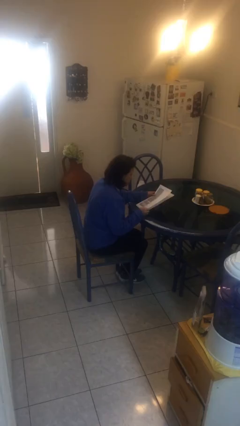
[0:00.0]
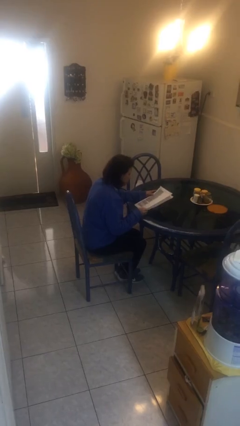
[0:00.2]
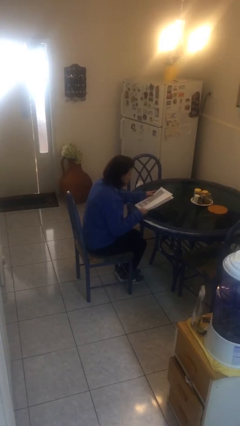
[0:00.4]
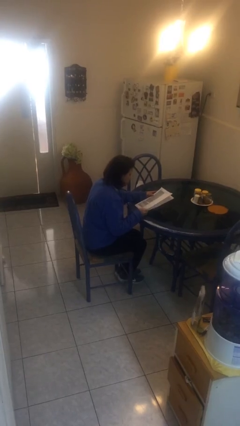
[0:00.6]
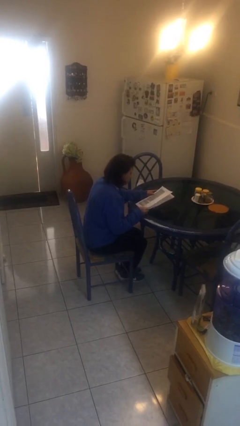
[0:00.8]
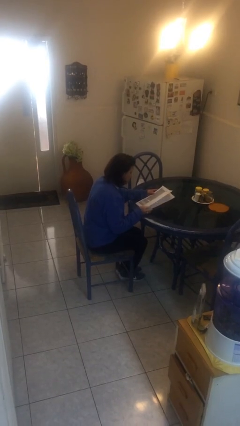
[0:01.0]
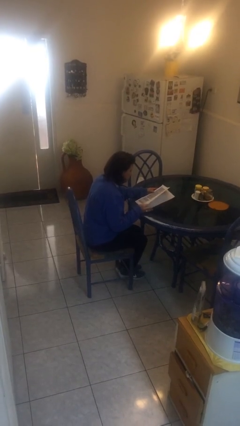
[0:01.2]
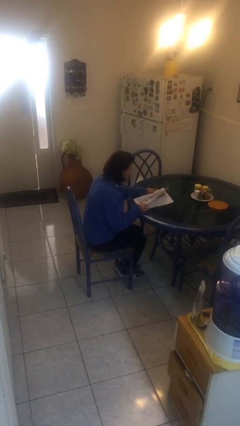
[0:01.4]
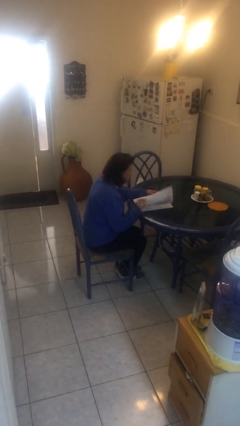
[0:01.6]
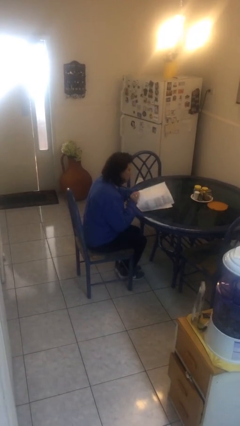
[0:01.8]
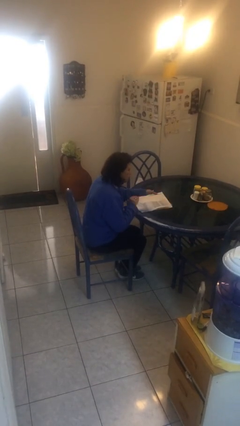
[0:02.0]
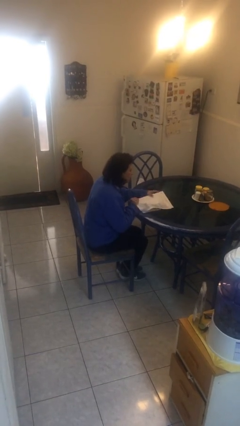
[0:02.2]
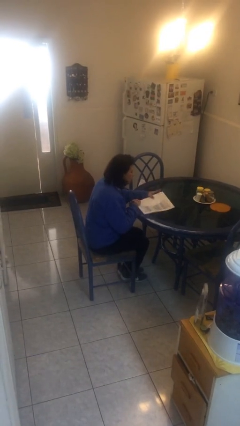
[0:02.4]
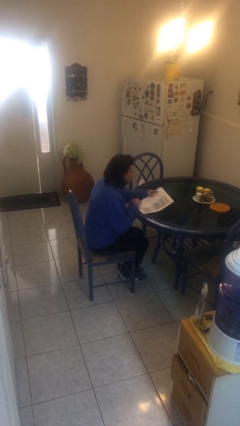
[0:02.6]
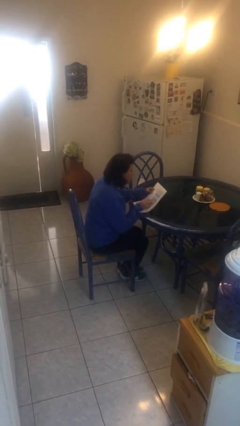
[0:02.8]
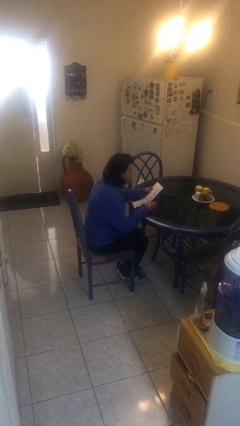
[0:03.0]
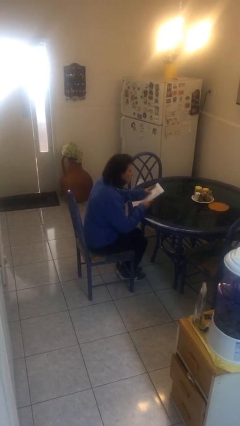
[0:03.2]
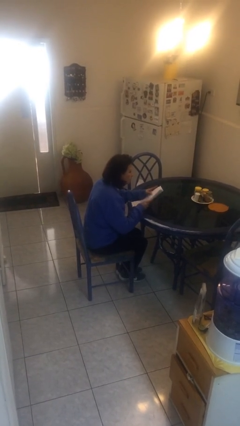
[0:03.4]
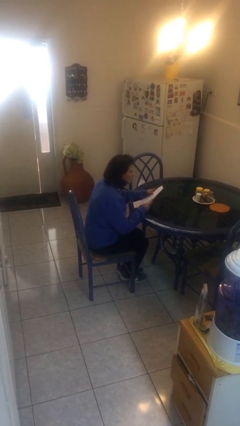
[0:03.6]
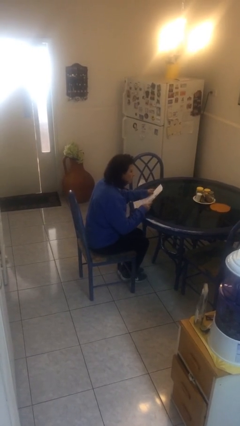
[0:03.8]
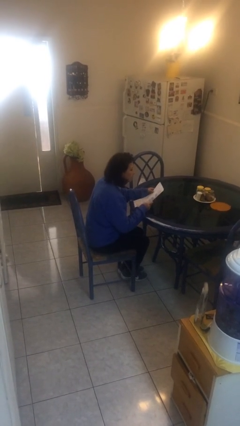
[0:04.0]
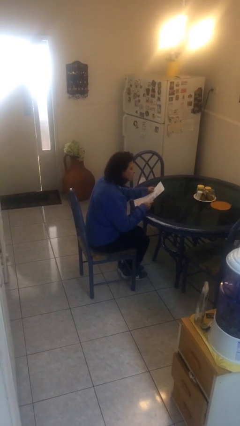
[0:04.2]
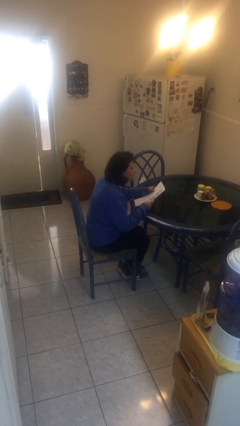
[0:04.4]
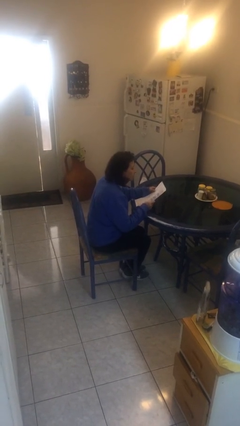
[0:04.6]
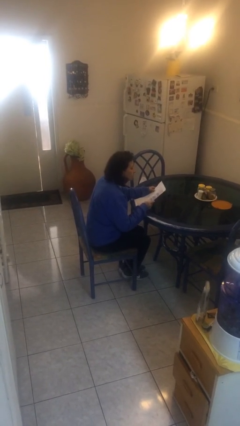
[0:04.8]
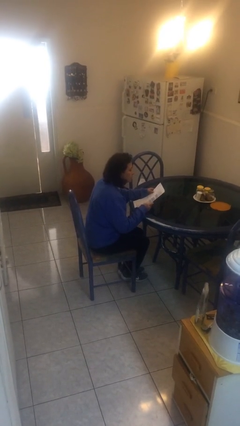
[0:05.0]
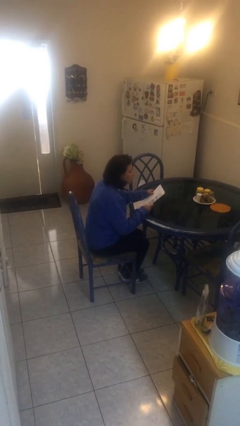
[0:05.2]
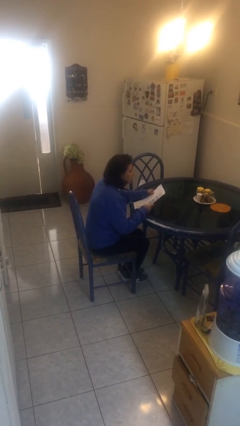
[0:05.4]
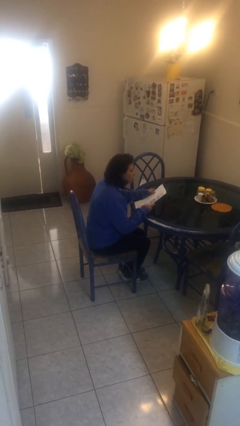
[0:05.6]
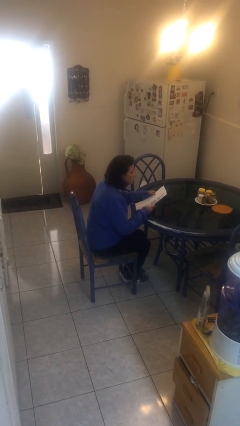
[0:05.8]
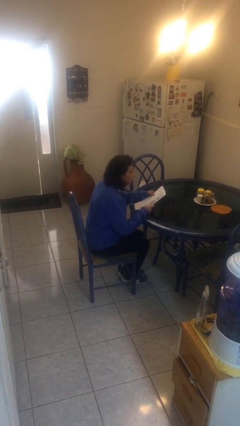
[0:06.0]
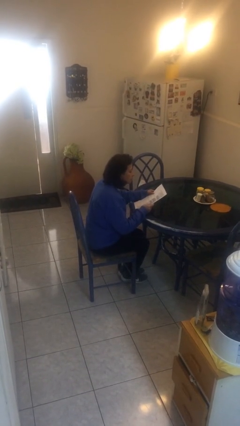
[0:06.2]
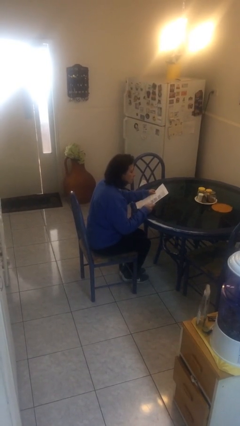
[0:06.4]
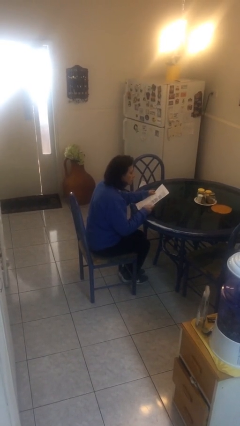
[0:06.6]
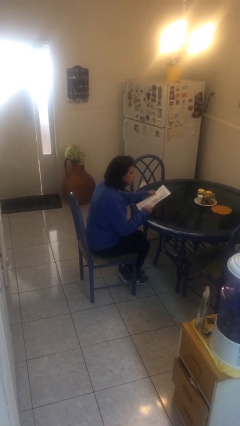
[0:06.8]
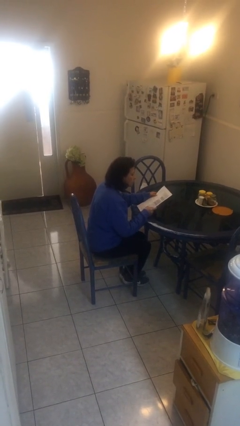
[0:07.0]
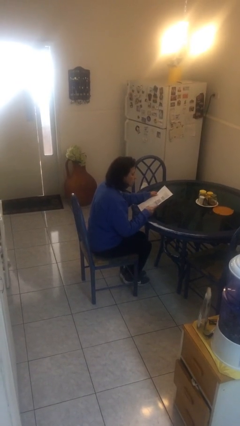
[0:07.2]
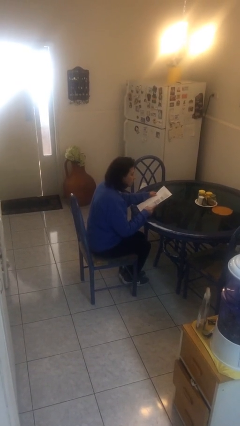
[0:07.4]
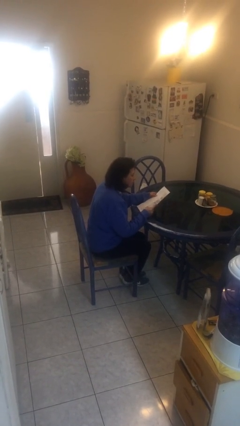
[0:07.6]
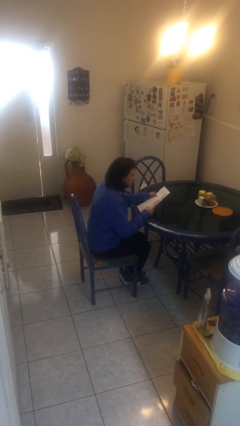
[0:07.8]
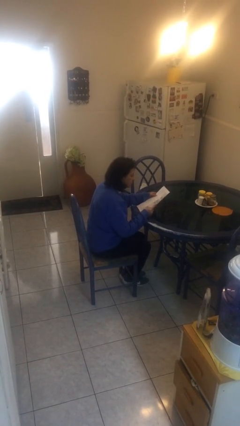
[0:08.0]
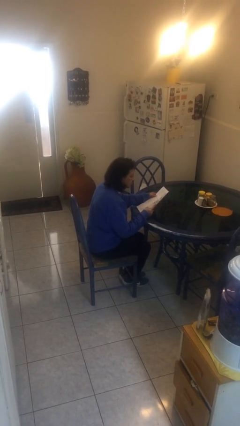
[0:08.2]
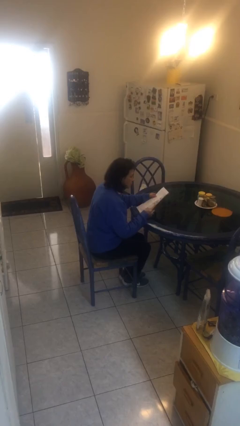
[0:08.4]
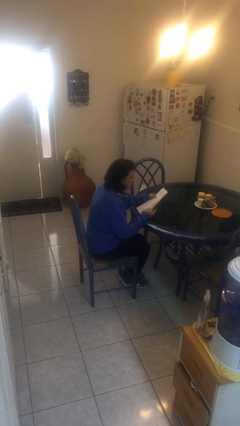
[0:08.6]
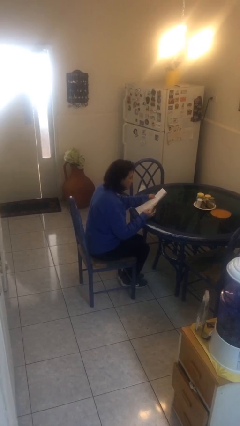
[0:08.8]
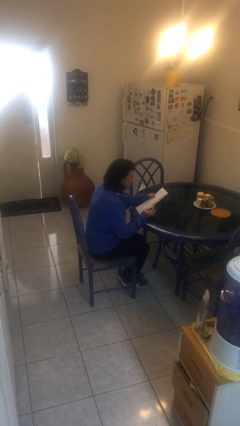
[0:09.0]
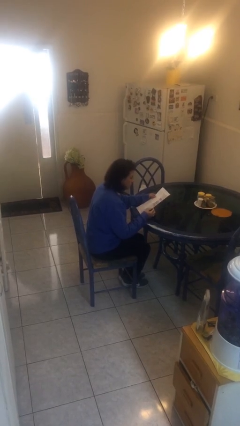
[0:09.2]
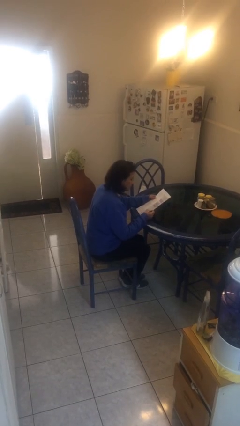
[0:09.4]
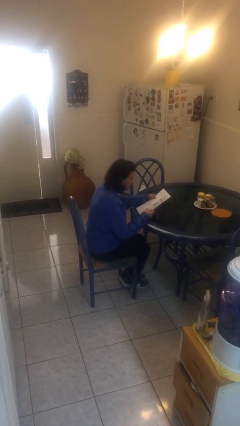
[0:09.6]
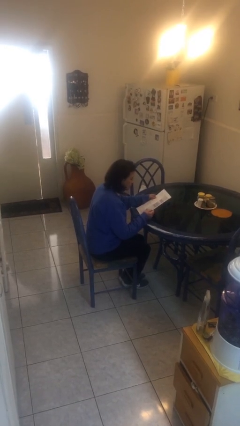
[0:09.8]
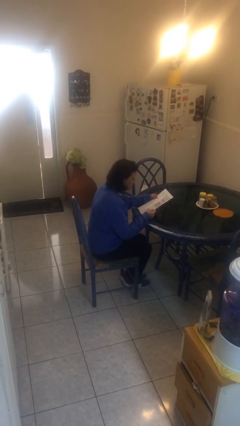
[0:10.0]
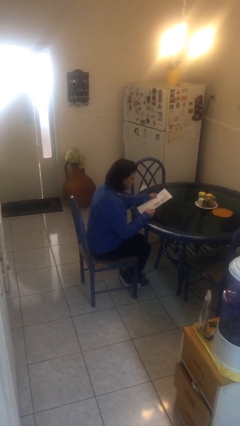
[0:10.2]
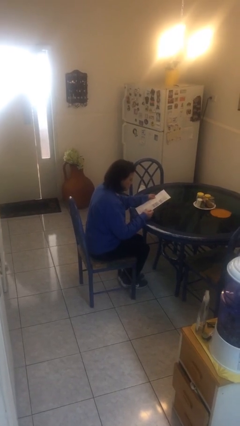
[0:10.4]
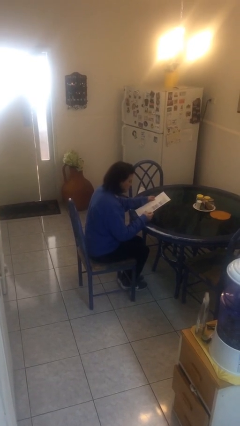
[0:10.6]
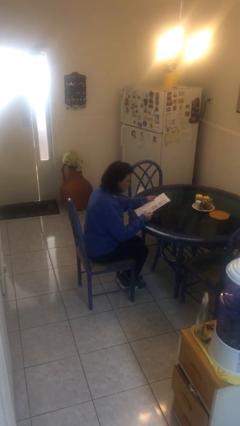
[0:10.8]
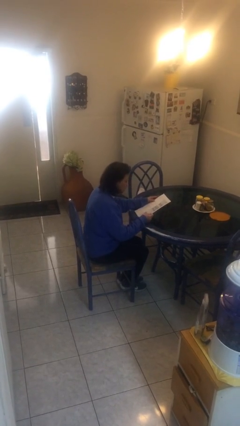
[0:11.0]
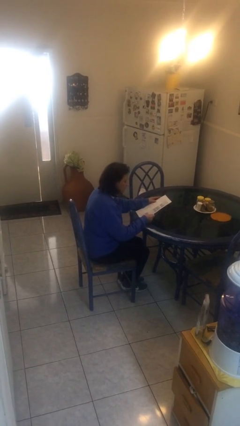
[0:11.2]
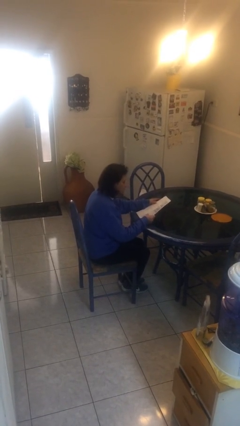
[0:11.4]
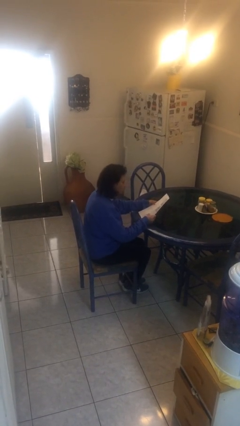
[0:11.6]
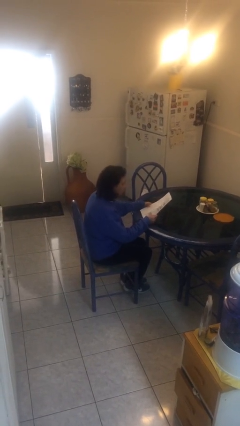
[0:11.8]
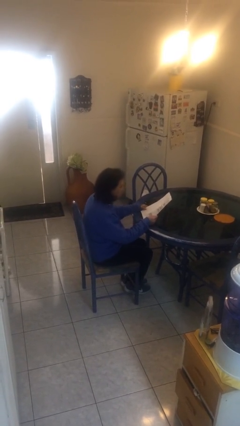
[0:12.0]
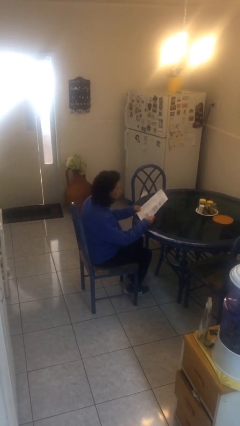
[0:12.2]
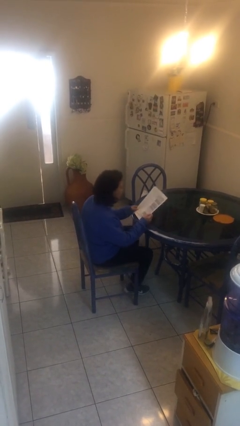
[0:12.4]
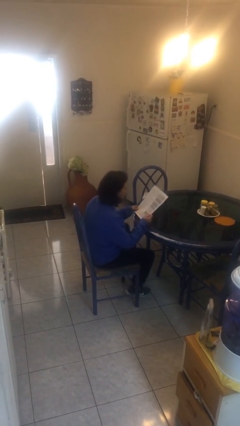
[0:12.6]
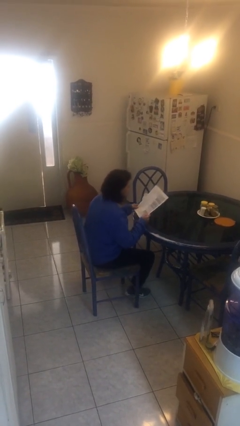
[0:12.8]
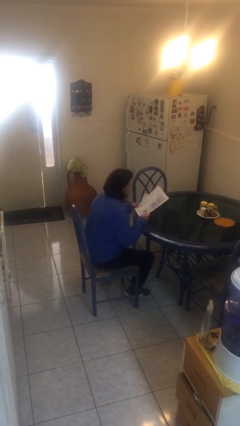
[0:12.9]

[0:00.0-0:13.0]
person reads document

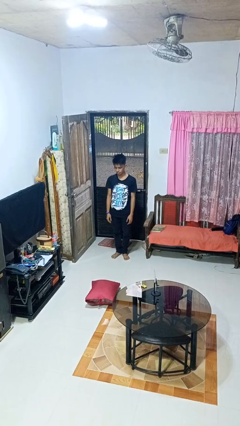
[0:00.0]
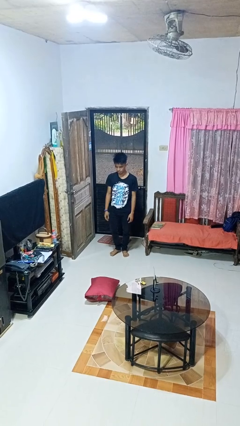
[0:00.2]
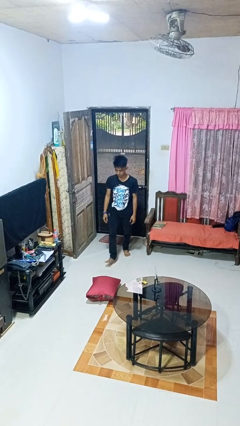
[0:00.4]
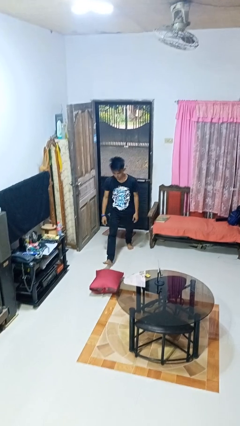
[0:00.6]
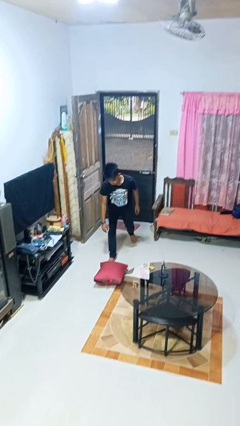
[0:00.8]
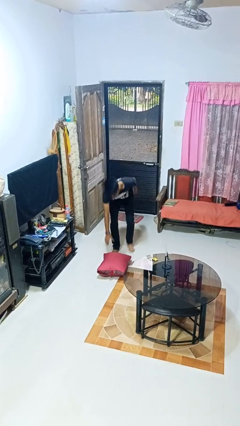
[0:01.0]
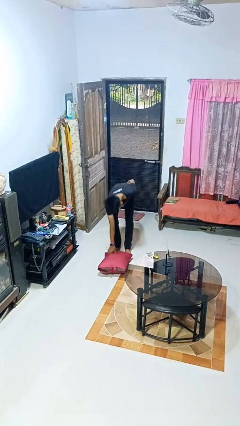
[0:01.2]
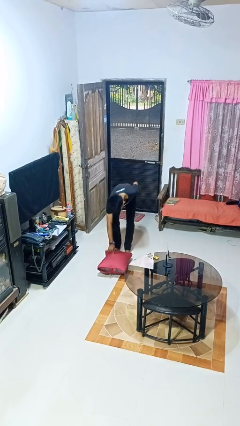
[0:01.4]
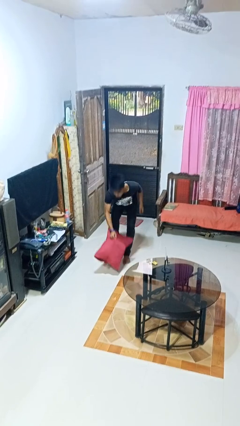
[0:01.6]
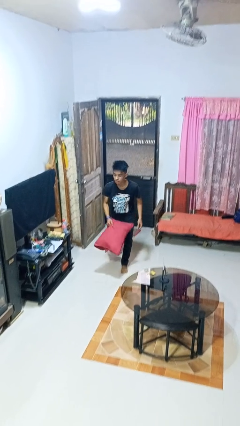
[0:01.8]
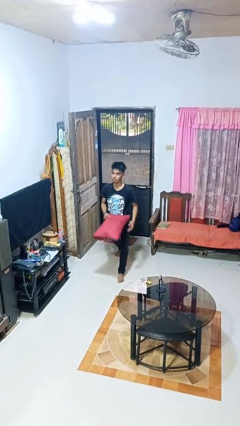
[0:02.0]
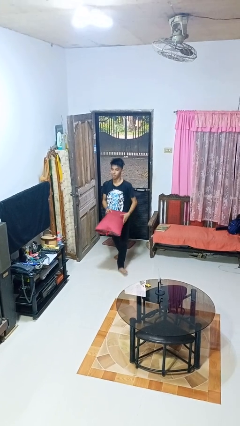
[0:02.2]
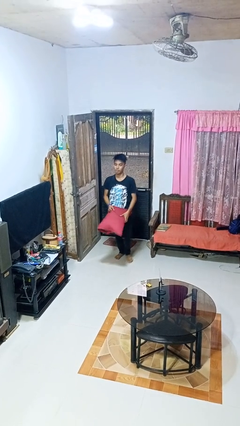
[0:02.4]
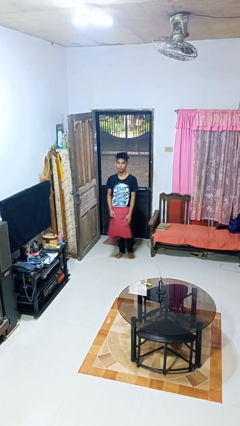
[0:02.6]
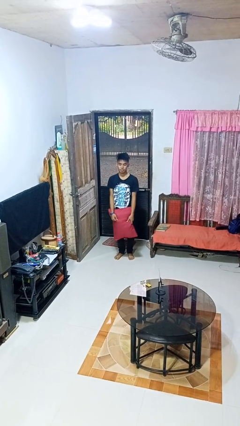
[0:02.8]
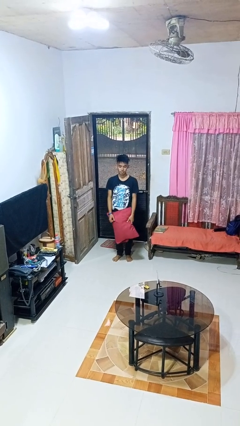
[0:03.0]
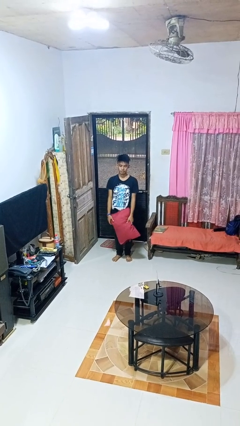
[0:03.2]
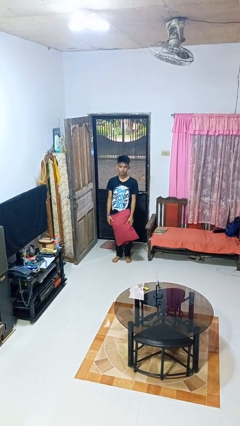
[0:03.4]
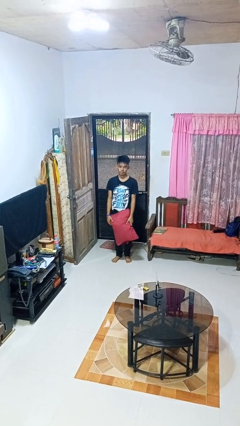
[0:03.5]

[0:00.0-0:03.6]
person picks up object from floor

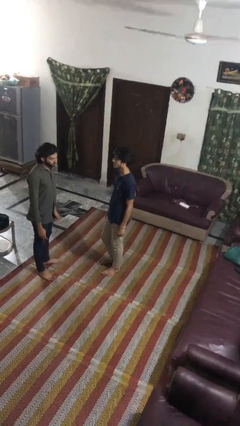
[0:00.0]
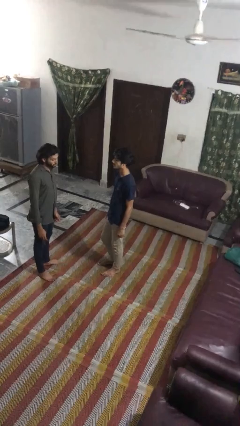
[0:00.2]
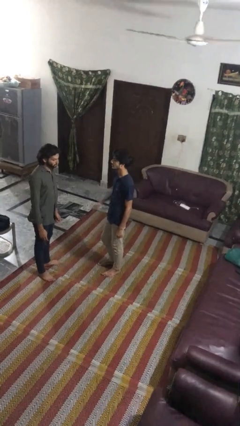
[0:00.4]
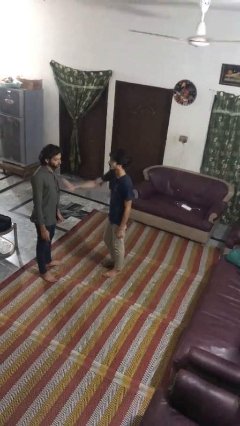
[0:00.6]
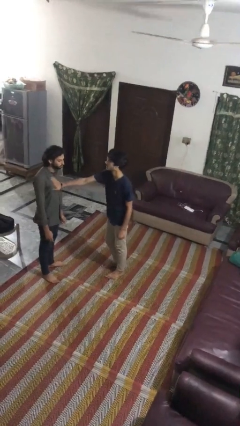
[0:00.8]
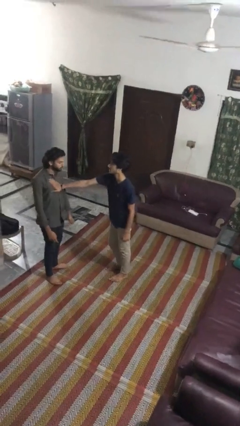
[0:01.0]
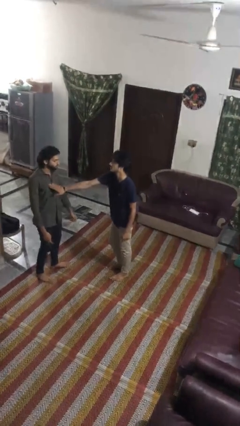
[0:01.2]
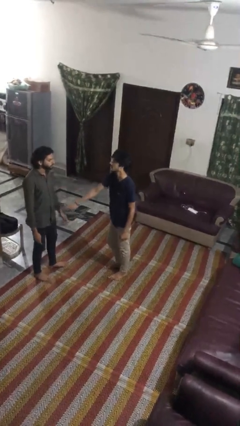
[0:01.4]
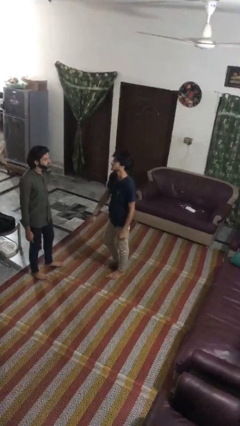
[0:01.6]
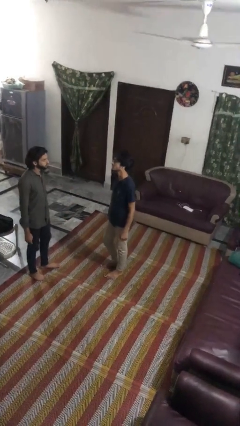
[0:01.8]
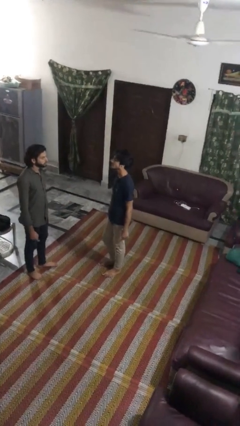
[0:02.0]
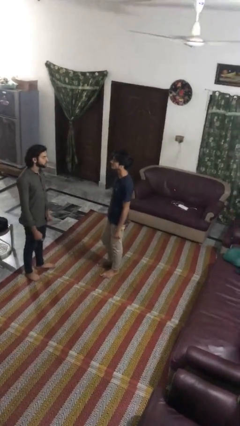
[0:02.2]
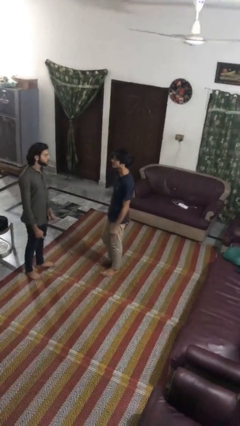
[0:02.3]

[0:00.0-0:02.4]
person shoves person
